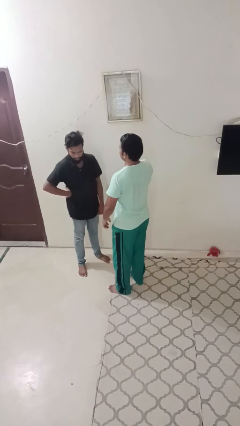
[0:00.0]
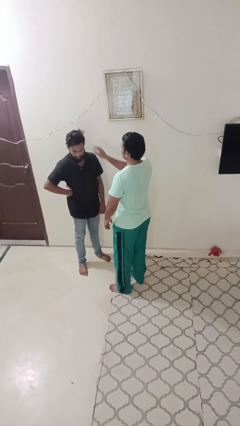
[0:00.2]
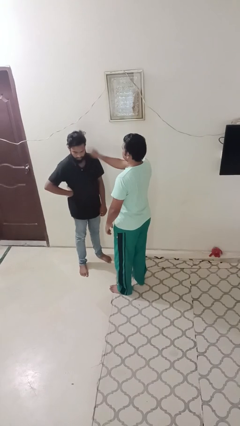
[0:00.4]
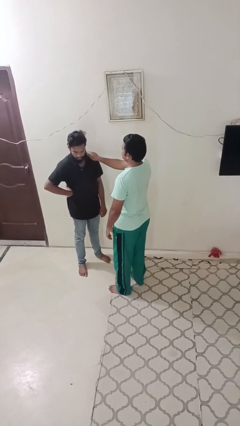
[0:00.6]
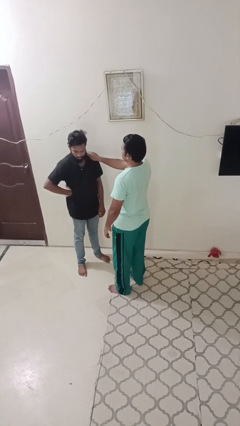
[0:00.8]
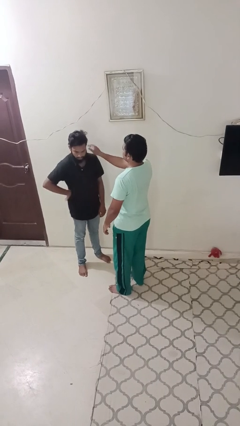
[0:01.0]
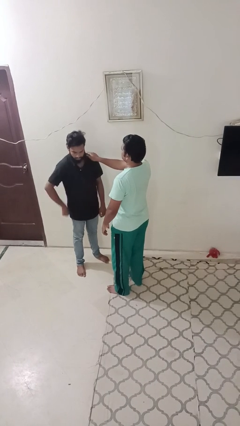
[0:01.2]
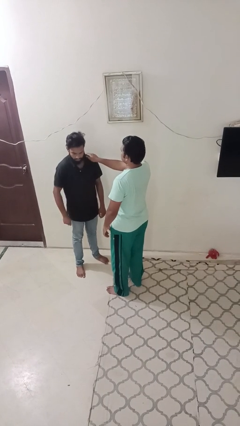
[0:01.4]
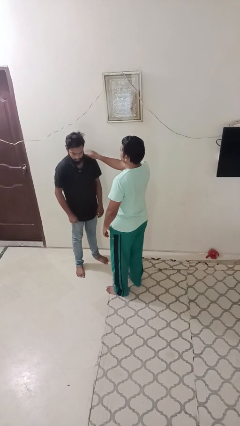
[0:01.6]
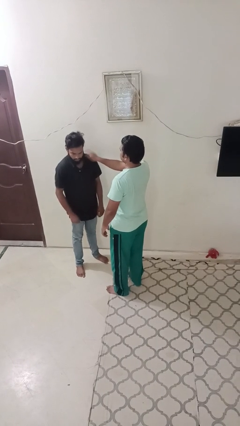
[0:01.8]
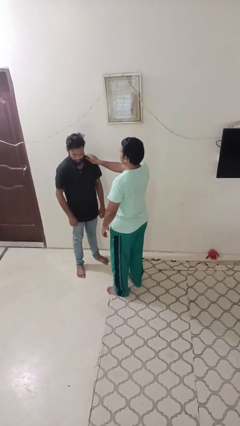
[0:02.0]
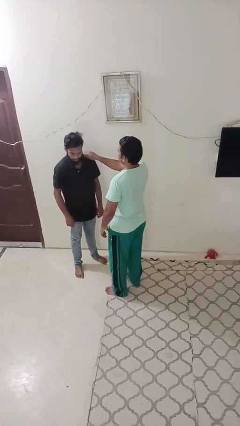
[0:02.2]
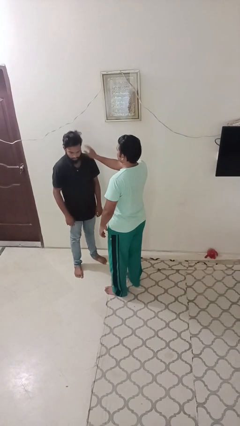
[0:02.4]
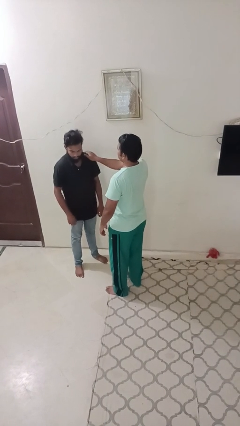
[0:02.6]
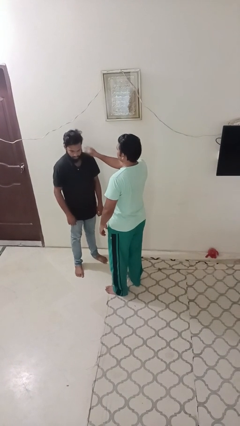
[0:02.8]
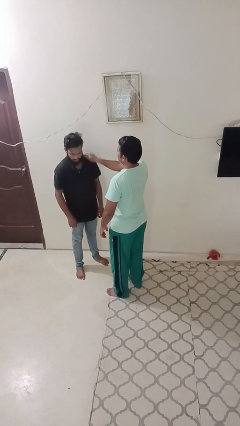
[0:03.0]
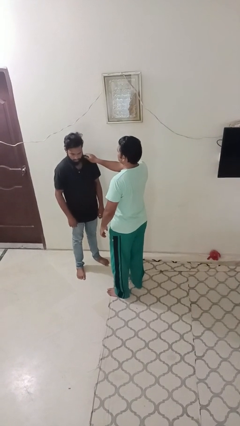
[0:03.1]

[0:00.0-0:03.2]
person pounds shoulders of person

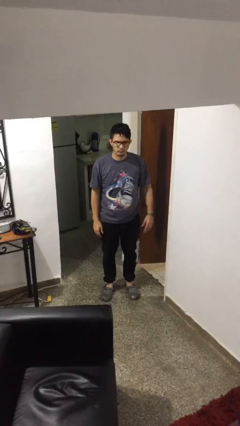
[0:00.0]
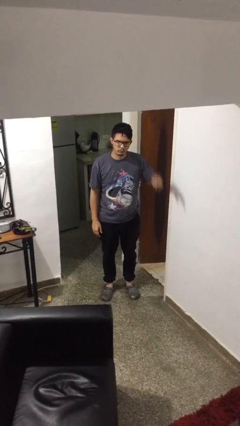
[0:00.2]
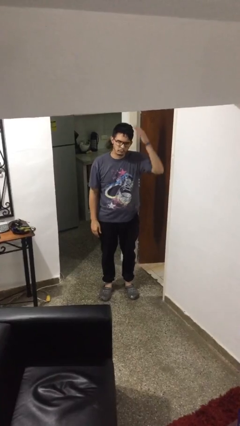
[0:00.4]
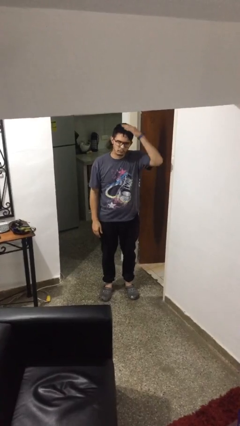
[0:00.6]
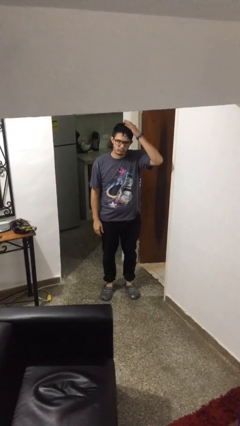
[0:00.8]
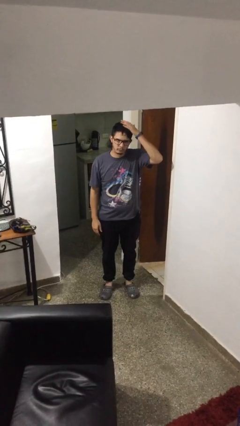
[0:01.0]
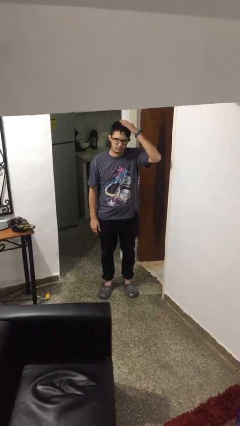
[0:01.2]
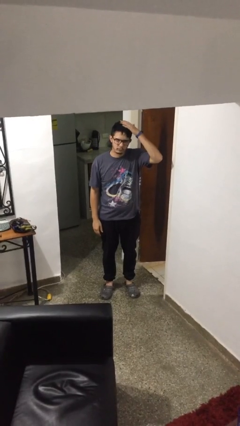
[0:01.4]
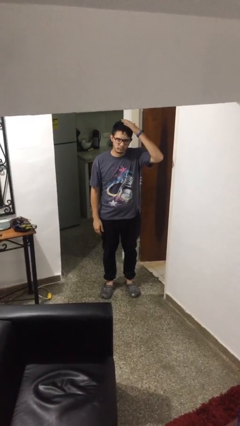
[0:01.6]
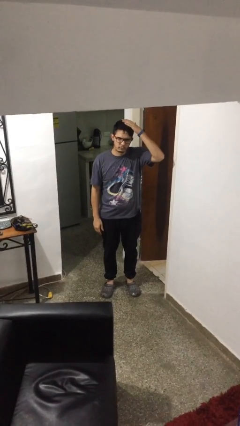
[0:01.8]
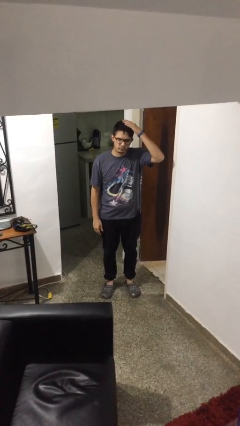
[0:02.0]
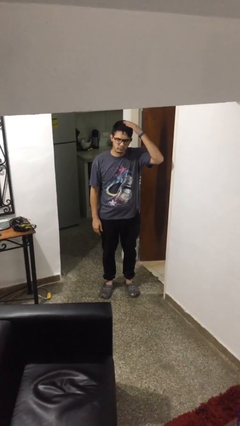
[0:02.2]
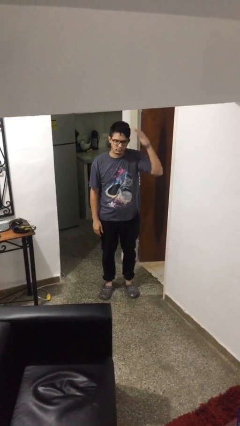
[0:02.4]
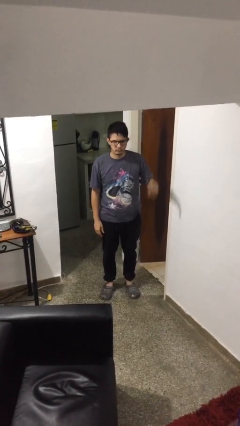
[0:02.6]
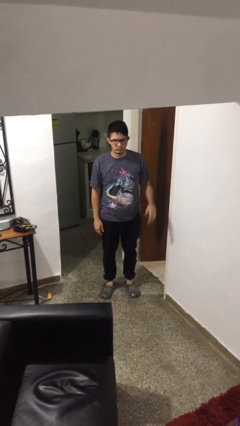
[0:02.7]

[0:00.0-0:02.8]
person pats head

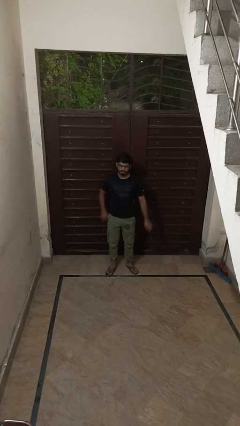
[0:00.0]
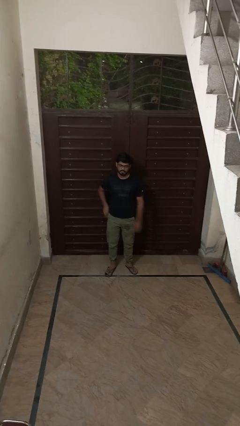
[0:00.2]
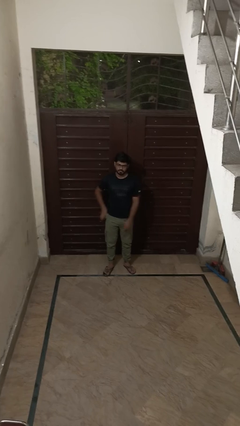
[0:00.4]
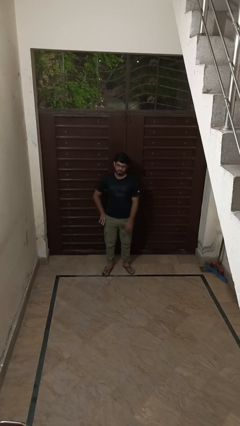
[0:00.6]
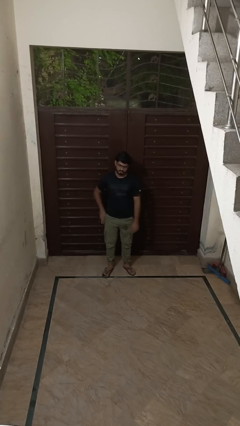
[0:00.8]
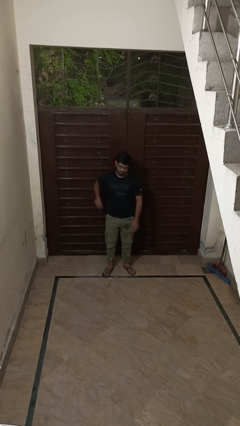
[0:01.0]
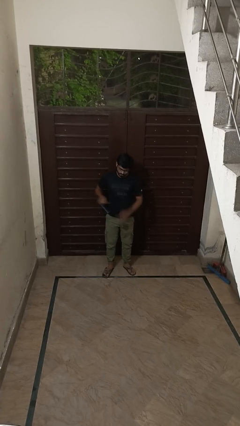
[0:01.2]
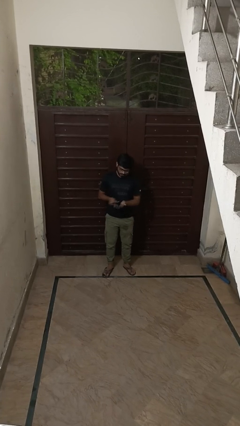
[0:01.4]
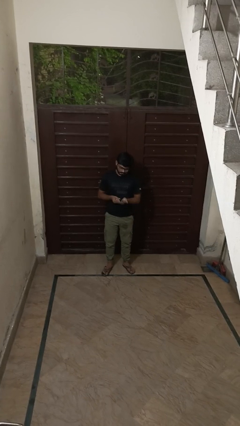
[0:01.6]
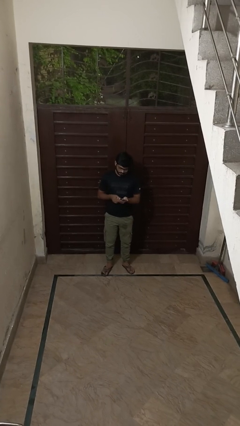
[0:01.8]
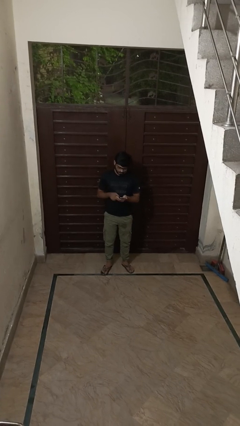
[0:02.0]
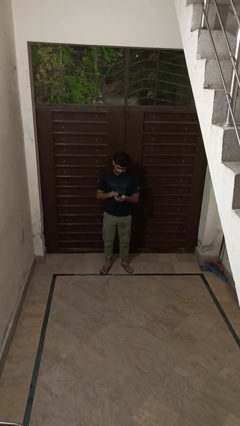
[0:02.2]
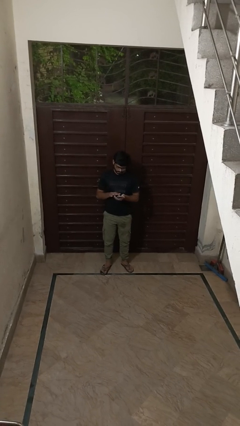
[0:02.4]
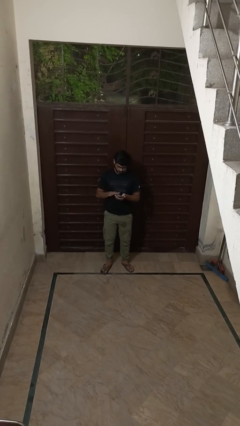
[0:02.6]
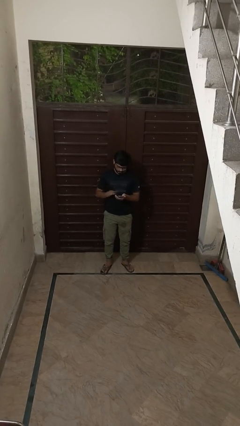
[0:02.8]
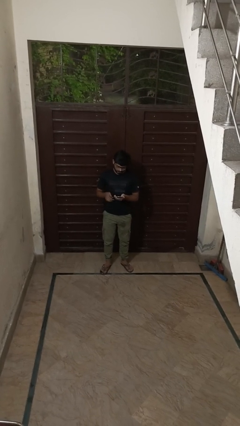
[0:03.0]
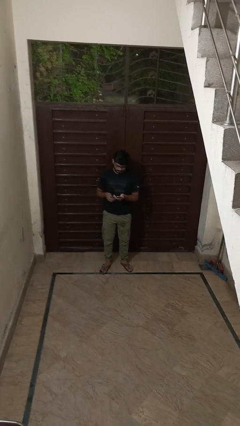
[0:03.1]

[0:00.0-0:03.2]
person takes phone from pocket

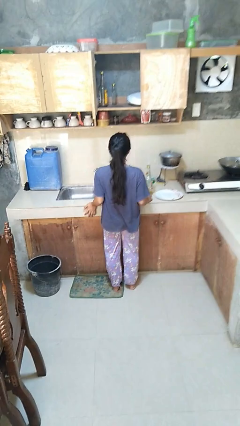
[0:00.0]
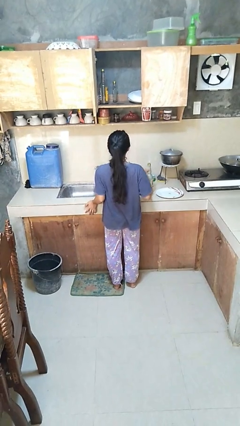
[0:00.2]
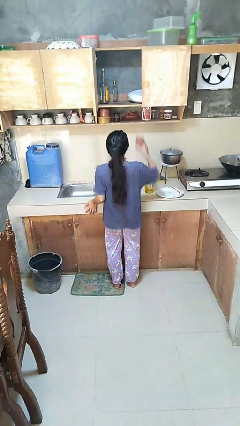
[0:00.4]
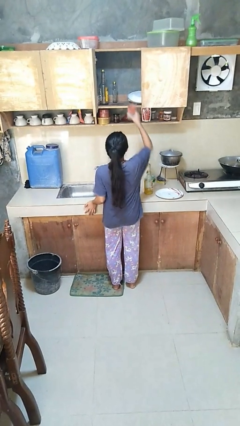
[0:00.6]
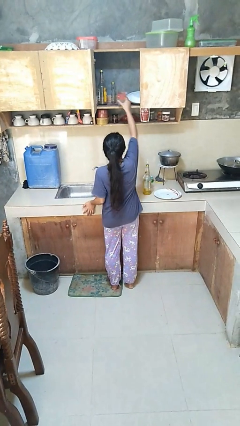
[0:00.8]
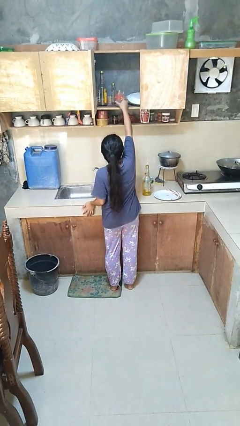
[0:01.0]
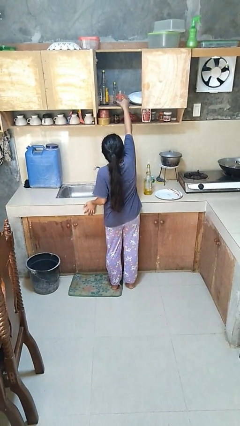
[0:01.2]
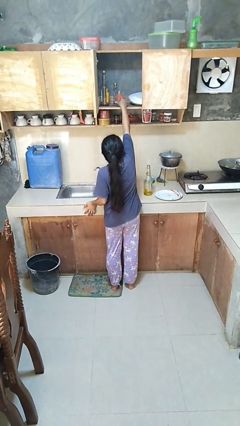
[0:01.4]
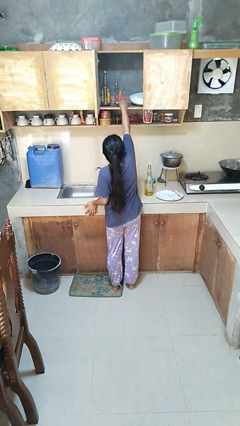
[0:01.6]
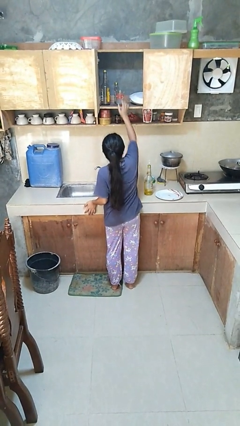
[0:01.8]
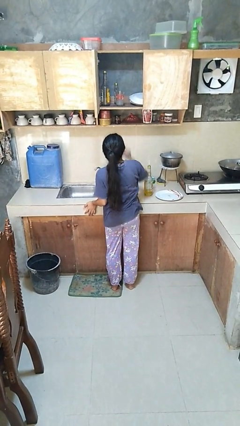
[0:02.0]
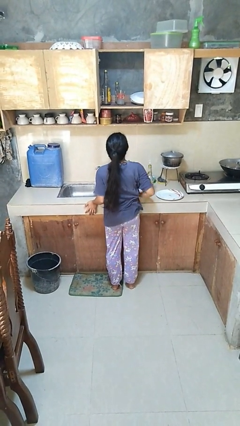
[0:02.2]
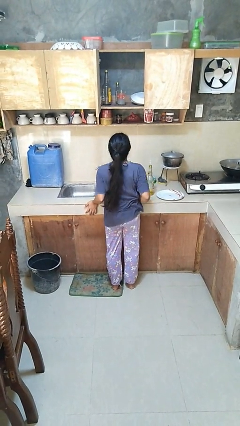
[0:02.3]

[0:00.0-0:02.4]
person puts object in cabinet

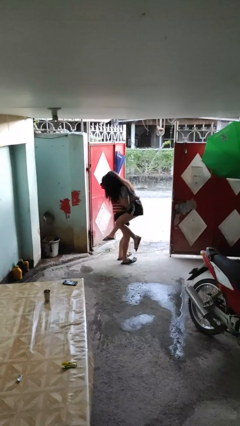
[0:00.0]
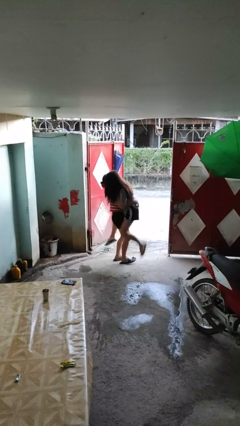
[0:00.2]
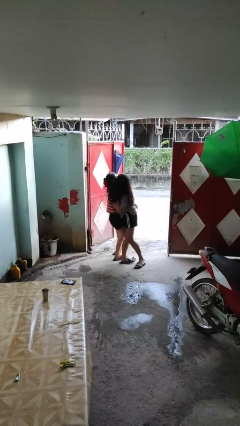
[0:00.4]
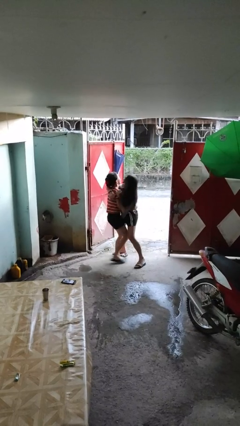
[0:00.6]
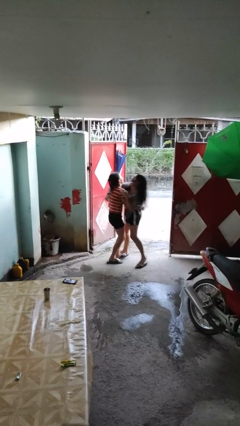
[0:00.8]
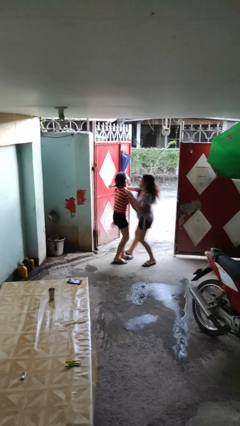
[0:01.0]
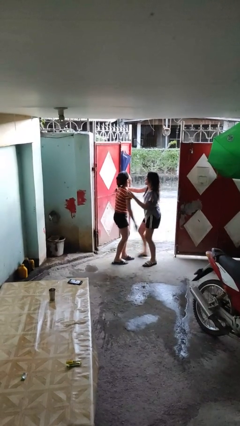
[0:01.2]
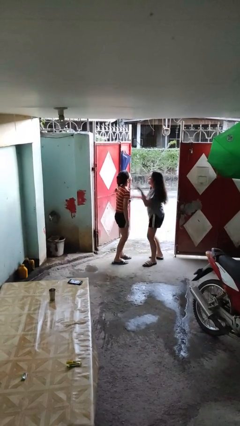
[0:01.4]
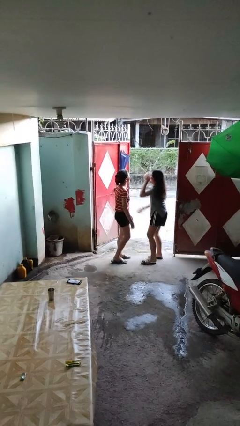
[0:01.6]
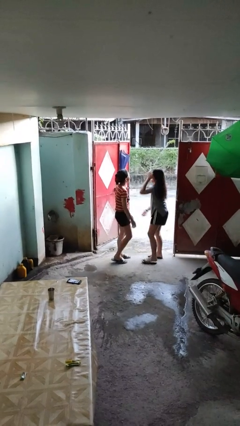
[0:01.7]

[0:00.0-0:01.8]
person puts down person

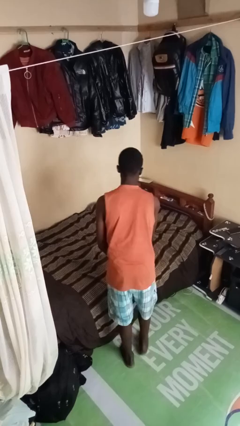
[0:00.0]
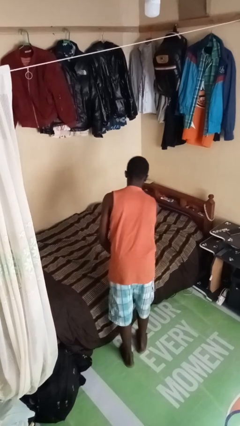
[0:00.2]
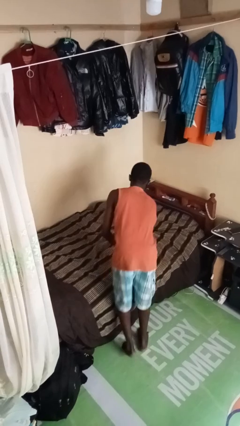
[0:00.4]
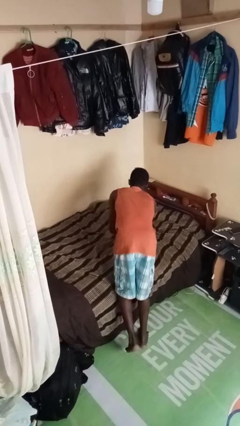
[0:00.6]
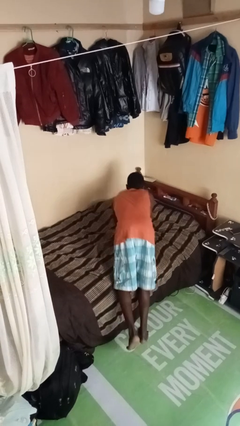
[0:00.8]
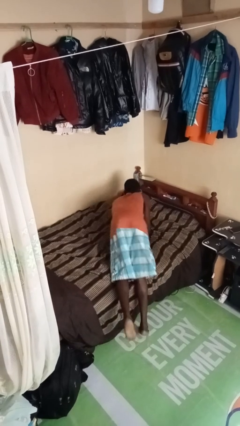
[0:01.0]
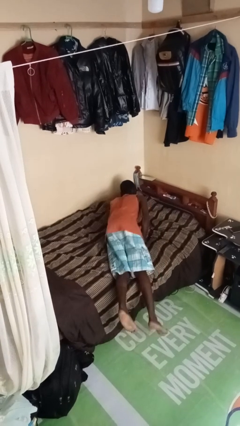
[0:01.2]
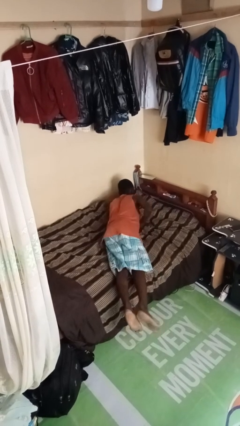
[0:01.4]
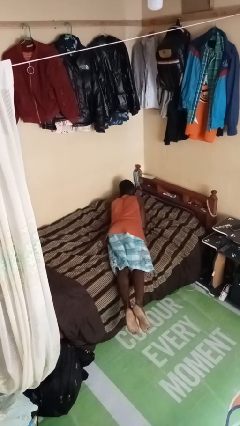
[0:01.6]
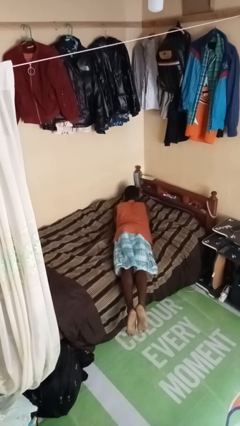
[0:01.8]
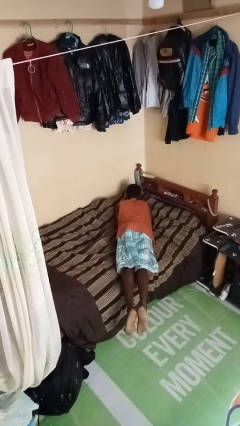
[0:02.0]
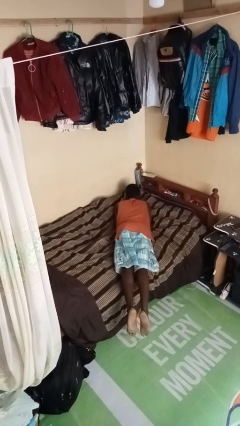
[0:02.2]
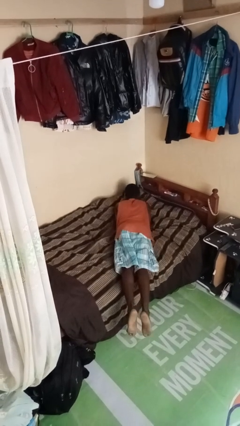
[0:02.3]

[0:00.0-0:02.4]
person lies down on bed

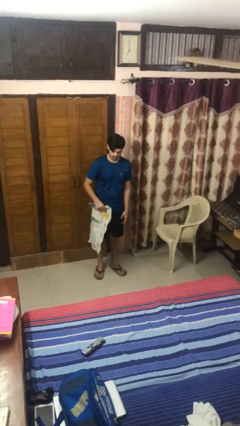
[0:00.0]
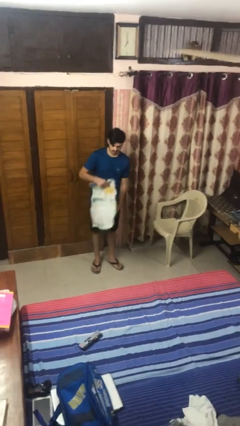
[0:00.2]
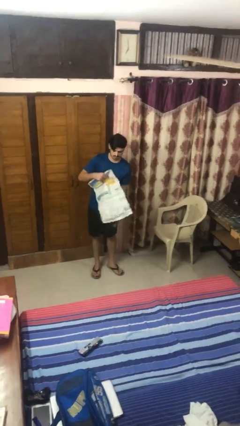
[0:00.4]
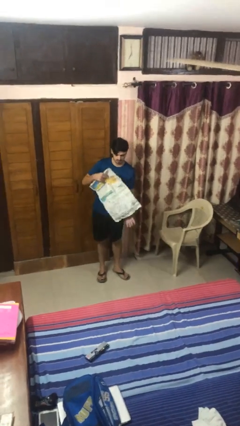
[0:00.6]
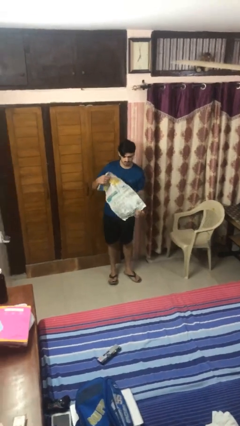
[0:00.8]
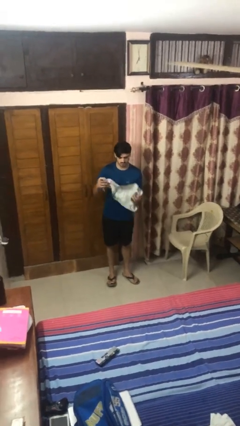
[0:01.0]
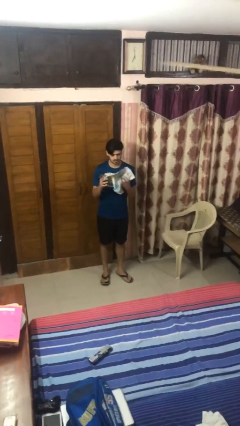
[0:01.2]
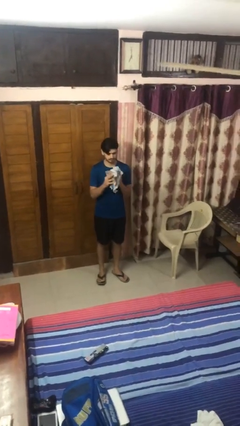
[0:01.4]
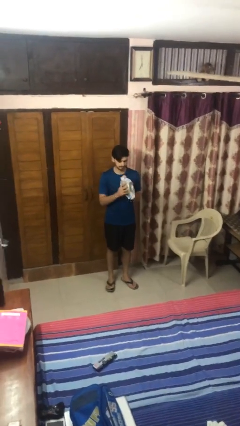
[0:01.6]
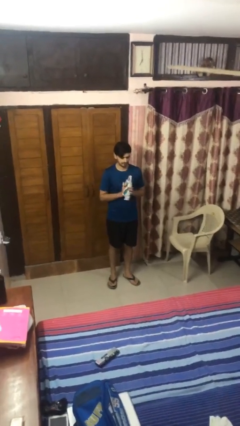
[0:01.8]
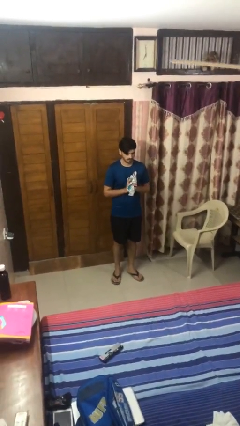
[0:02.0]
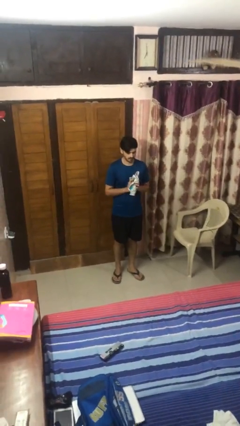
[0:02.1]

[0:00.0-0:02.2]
person crumples paper
